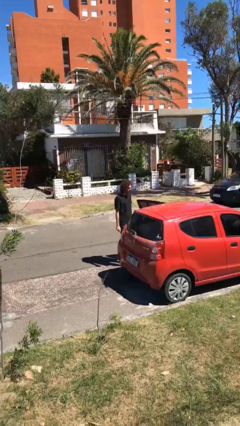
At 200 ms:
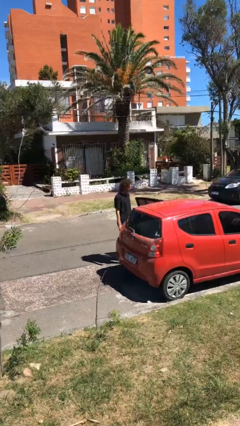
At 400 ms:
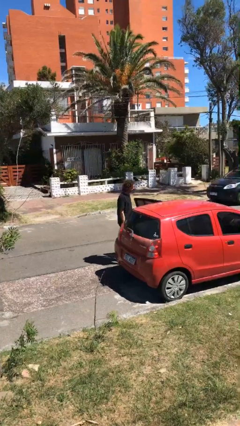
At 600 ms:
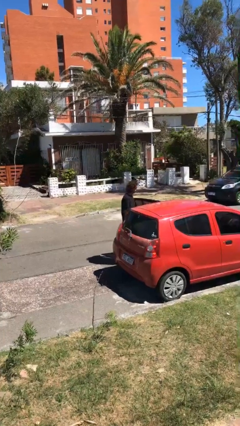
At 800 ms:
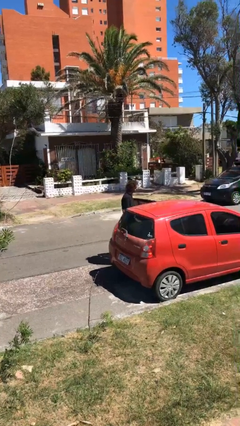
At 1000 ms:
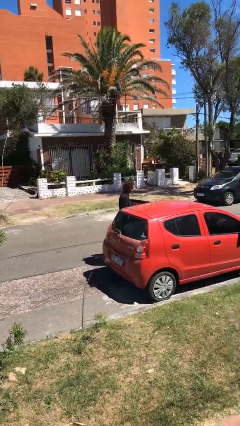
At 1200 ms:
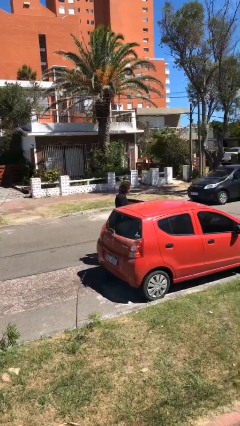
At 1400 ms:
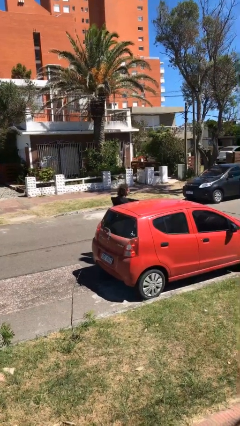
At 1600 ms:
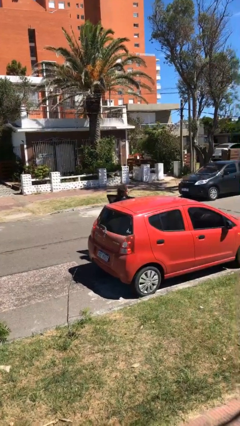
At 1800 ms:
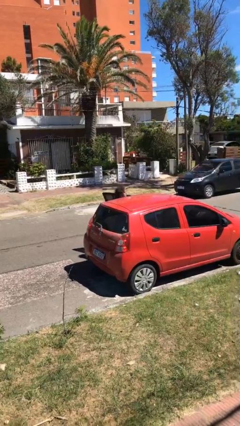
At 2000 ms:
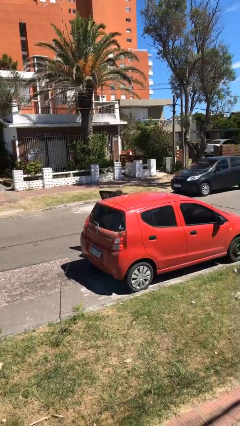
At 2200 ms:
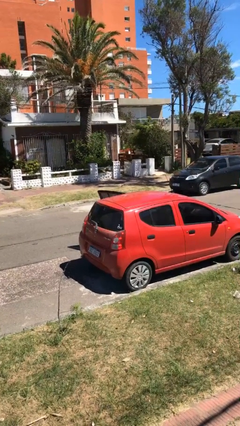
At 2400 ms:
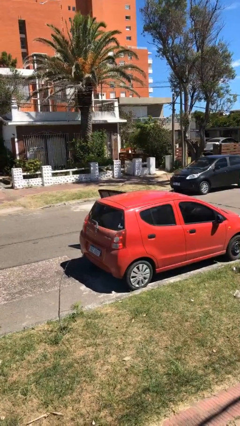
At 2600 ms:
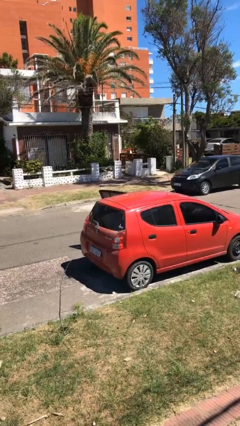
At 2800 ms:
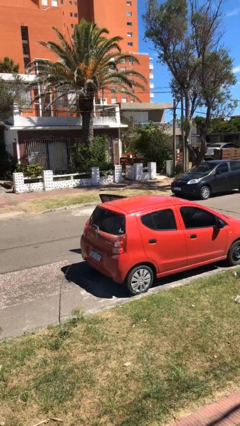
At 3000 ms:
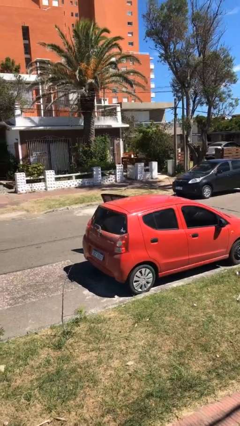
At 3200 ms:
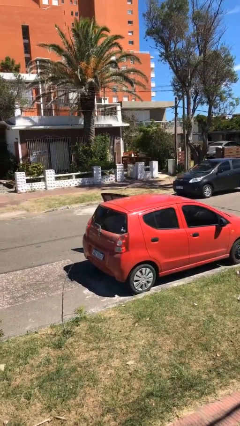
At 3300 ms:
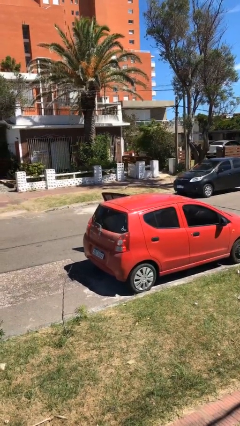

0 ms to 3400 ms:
person enters car

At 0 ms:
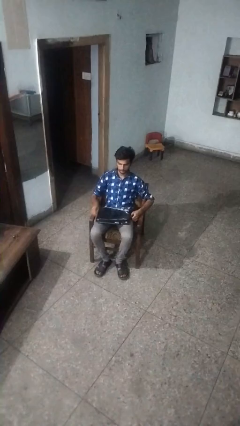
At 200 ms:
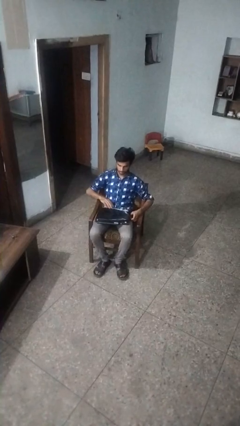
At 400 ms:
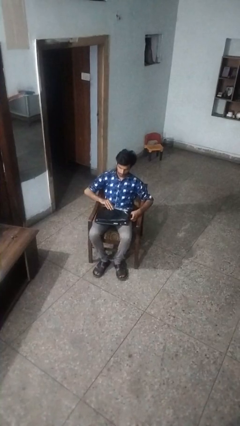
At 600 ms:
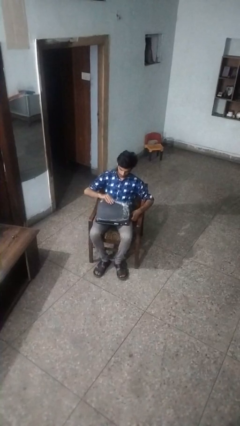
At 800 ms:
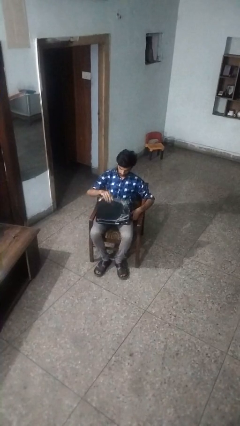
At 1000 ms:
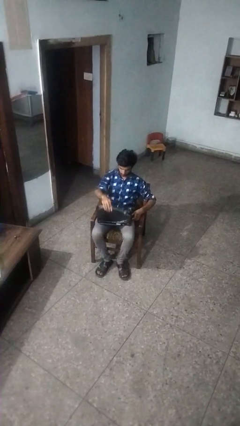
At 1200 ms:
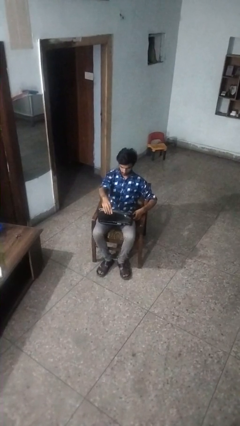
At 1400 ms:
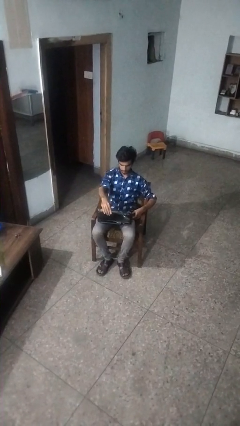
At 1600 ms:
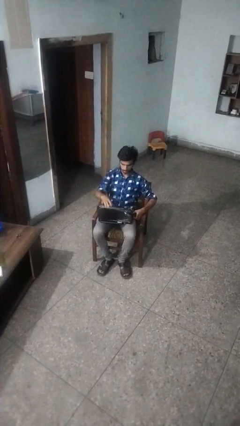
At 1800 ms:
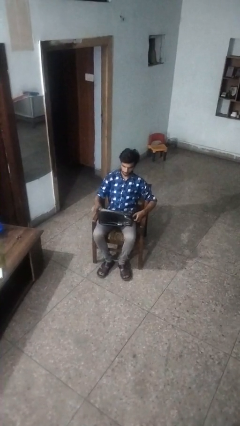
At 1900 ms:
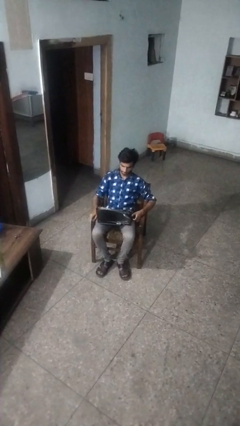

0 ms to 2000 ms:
person opens laptop

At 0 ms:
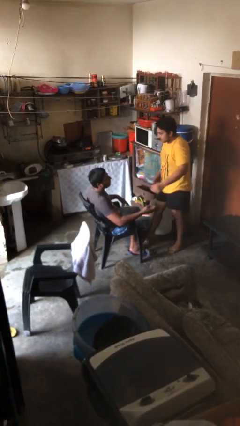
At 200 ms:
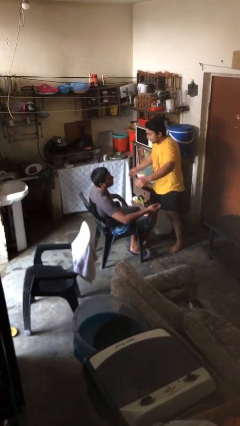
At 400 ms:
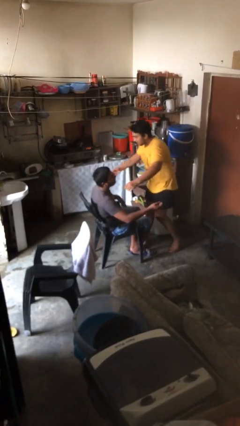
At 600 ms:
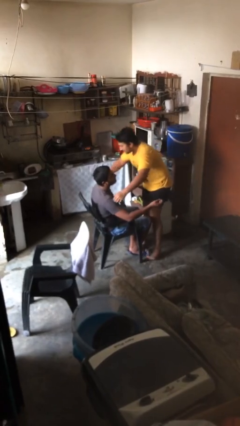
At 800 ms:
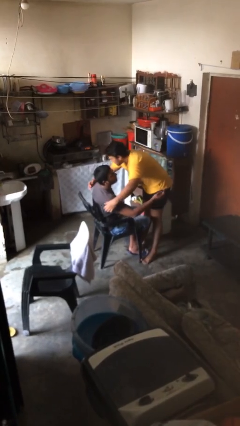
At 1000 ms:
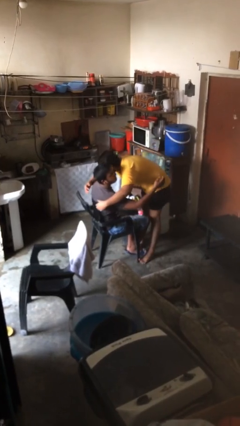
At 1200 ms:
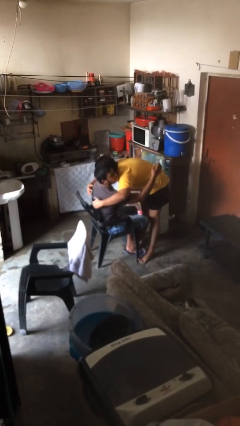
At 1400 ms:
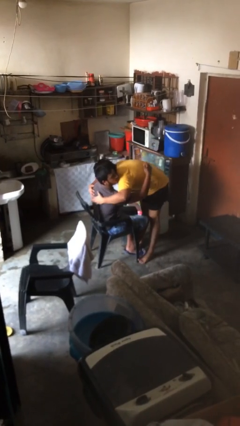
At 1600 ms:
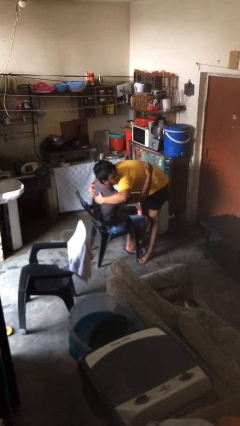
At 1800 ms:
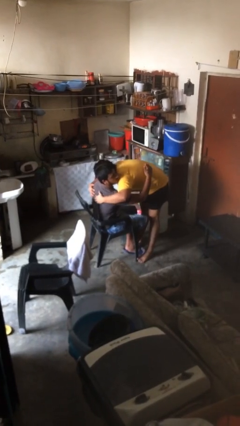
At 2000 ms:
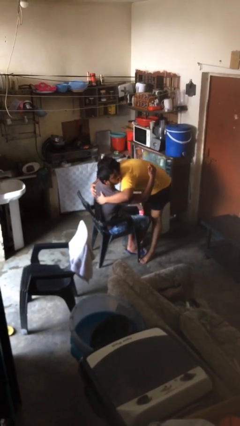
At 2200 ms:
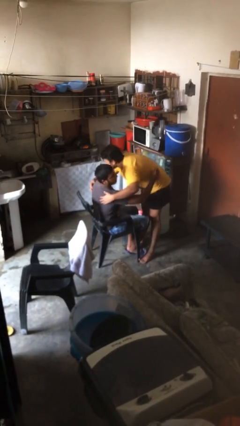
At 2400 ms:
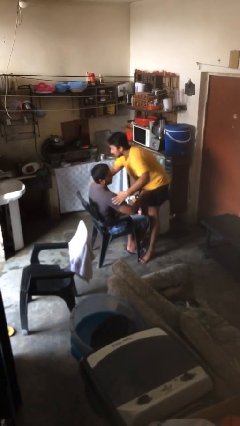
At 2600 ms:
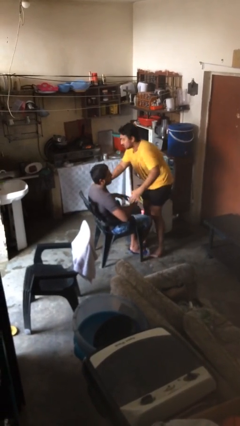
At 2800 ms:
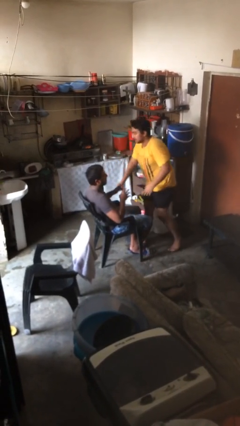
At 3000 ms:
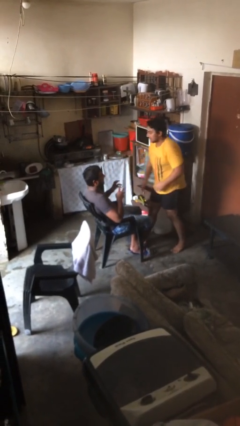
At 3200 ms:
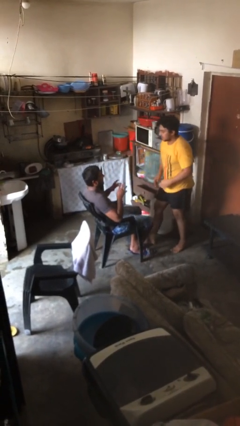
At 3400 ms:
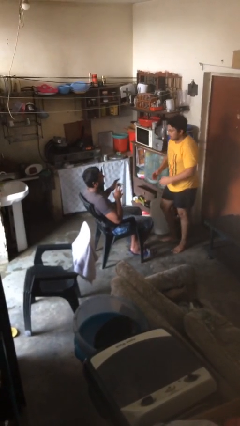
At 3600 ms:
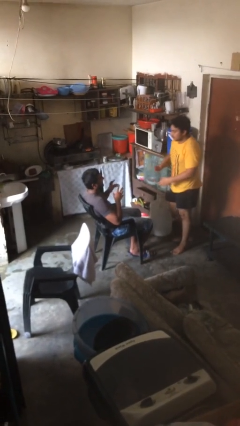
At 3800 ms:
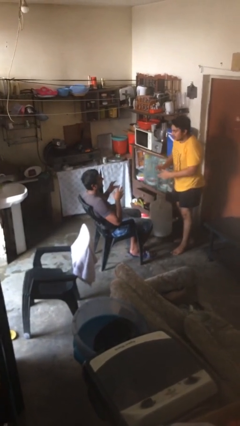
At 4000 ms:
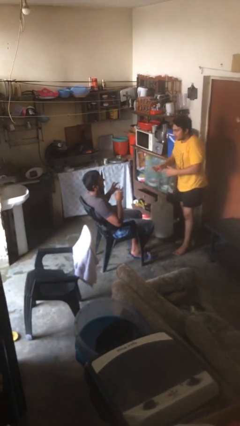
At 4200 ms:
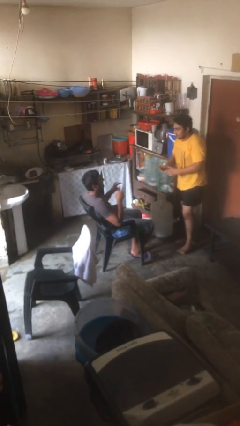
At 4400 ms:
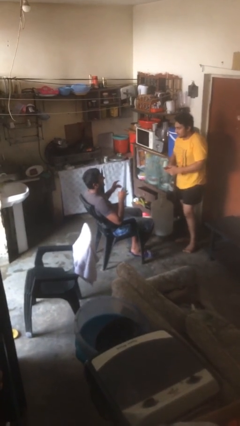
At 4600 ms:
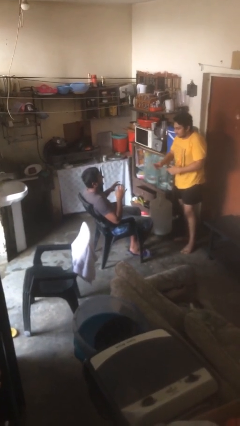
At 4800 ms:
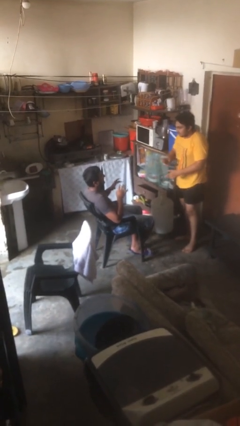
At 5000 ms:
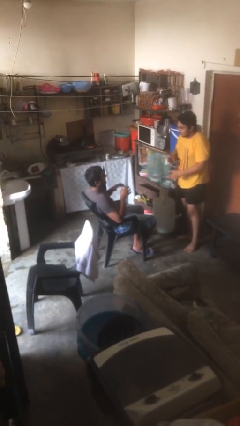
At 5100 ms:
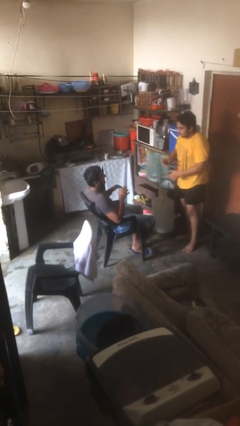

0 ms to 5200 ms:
person embraces person

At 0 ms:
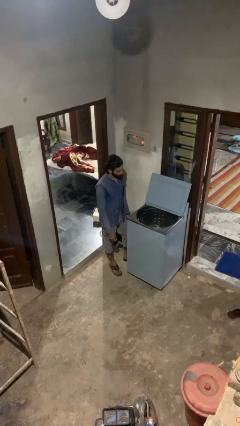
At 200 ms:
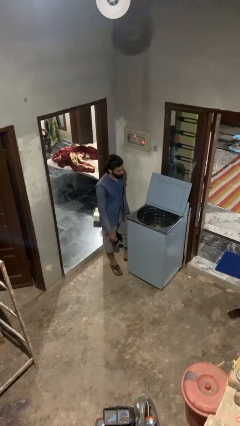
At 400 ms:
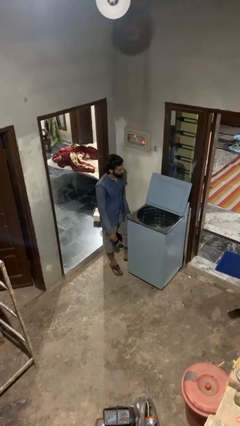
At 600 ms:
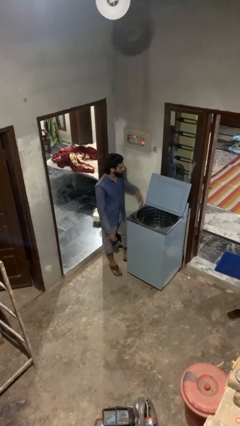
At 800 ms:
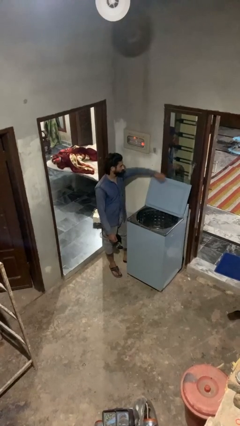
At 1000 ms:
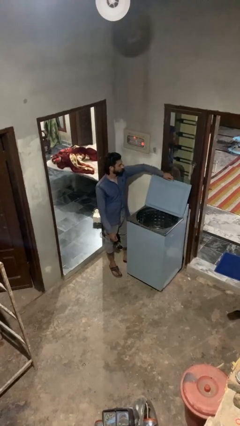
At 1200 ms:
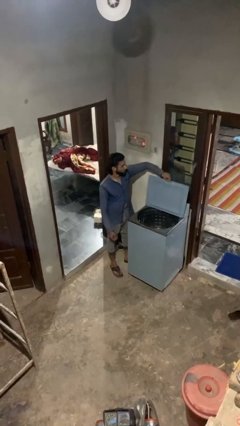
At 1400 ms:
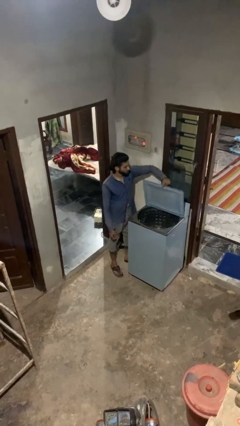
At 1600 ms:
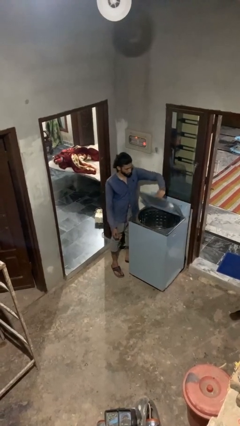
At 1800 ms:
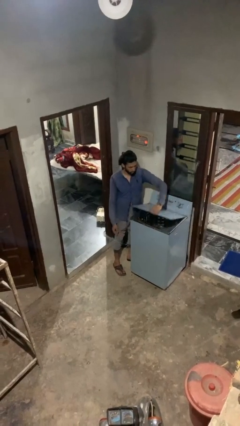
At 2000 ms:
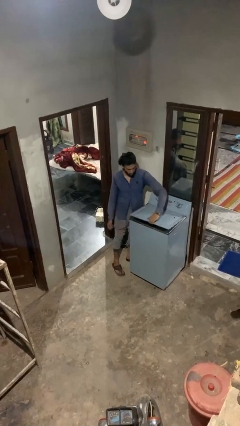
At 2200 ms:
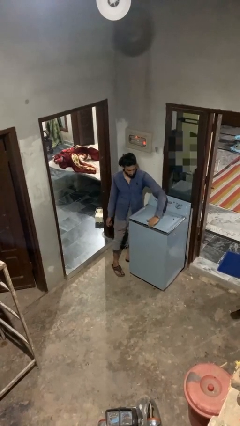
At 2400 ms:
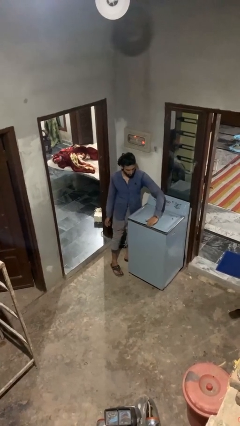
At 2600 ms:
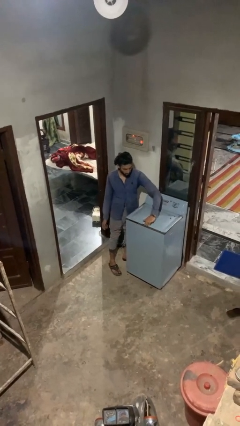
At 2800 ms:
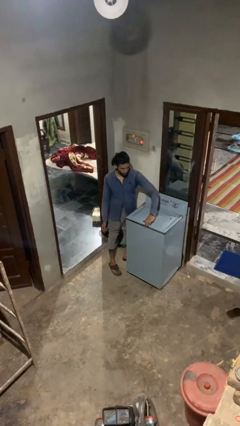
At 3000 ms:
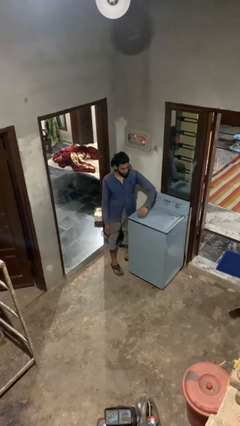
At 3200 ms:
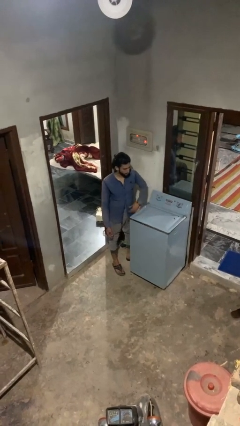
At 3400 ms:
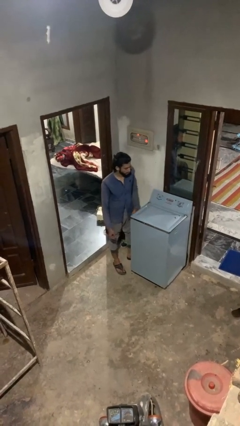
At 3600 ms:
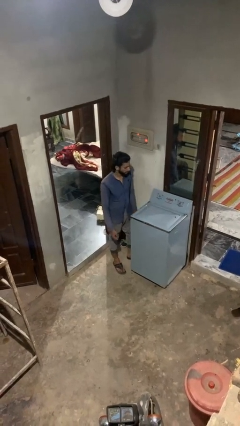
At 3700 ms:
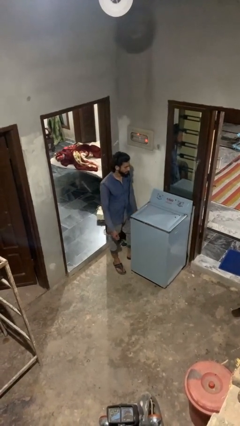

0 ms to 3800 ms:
person closes clothes washer

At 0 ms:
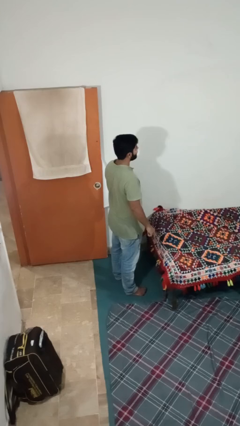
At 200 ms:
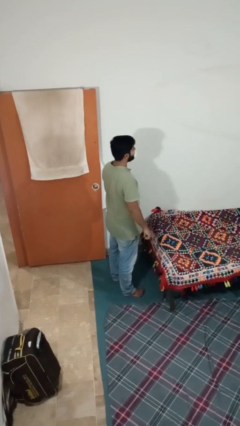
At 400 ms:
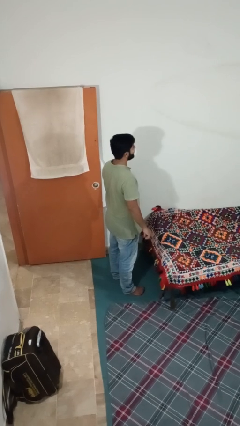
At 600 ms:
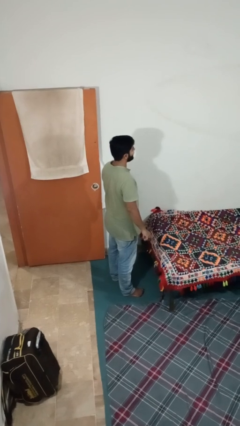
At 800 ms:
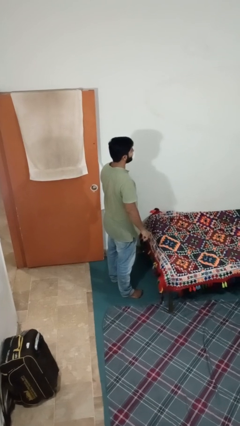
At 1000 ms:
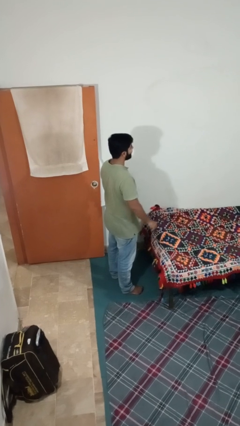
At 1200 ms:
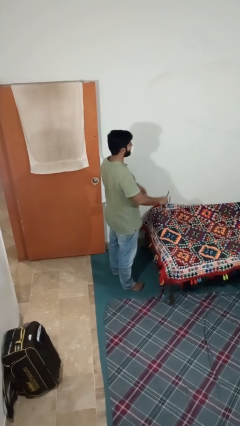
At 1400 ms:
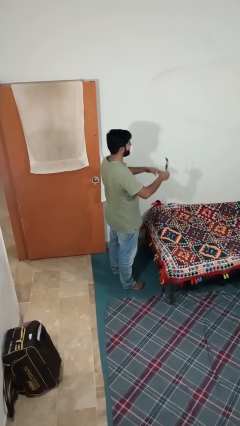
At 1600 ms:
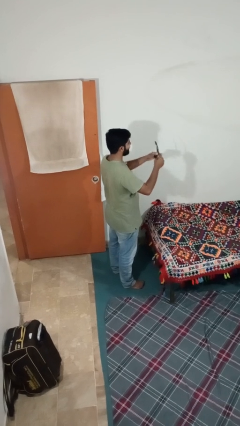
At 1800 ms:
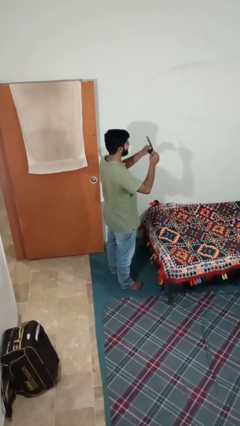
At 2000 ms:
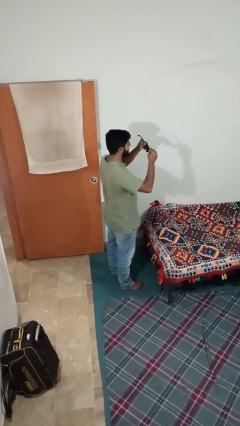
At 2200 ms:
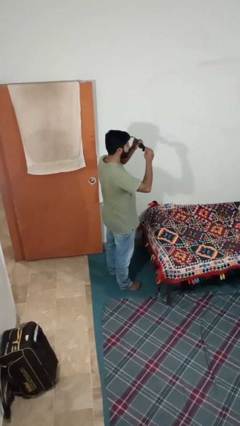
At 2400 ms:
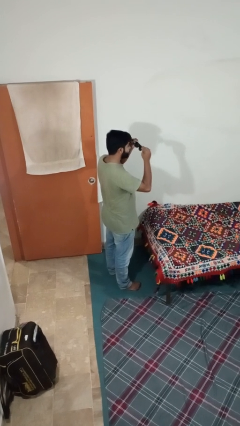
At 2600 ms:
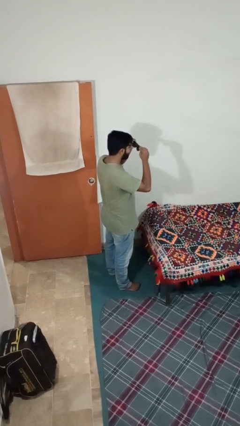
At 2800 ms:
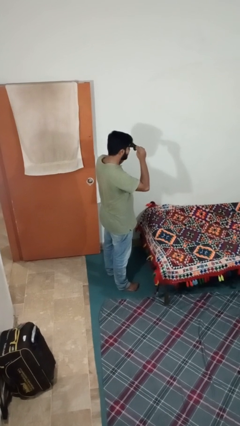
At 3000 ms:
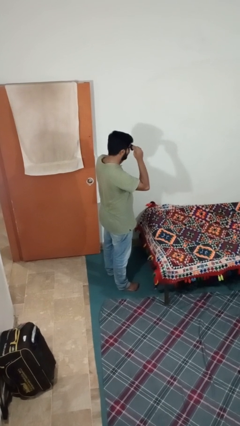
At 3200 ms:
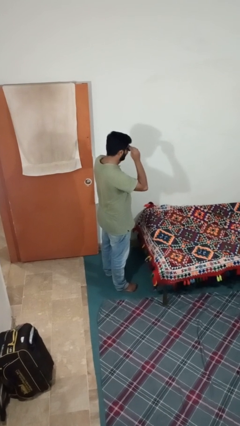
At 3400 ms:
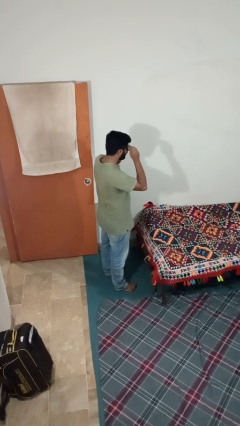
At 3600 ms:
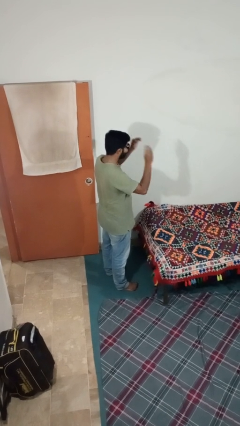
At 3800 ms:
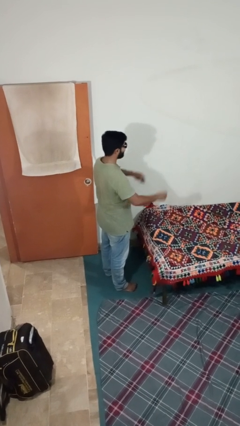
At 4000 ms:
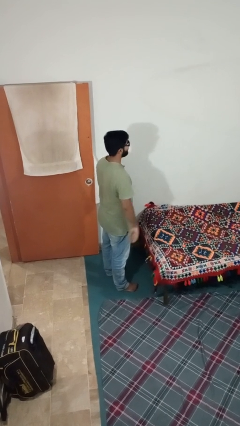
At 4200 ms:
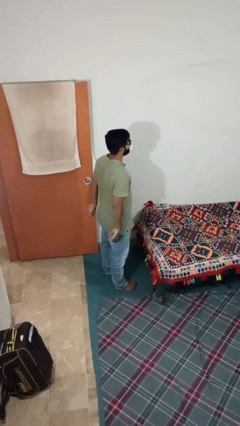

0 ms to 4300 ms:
person puts on sunglasses
